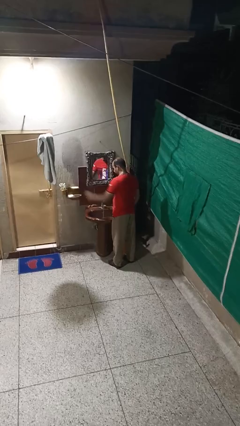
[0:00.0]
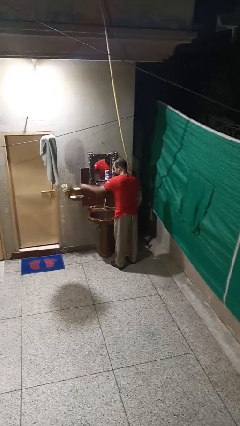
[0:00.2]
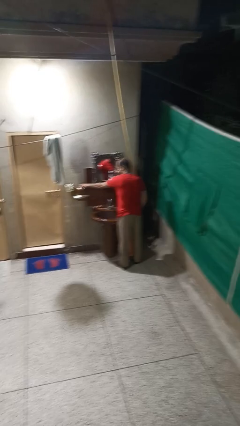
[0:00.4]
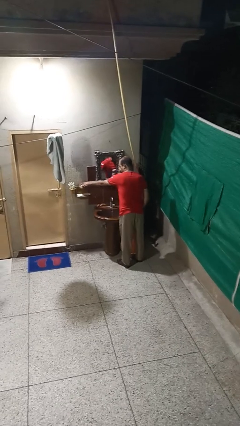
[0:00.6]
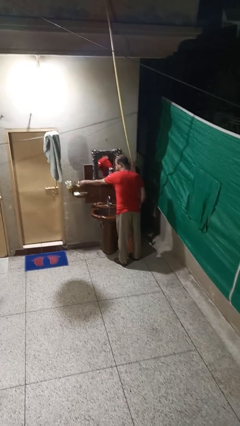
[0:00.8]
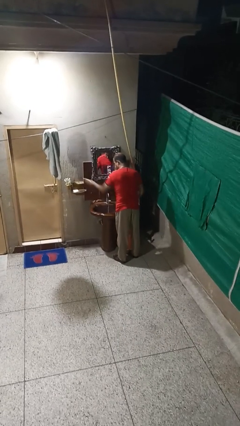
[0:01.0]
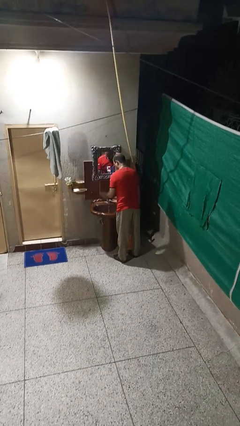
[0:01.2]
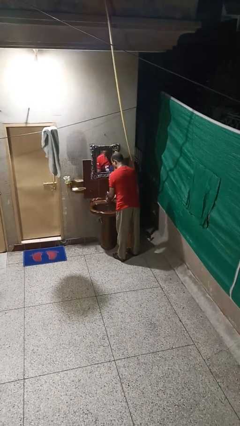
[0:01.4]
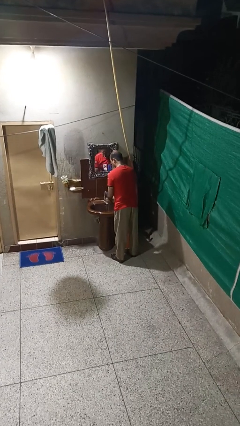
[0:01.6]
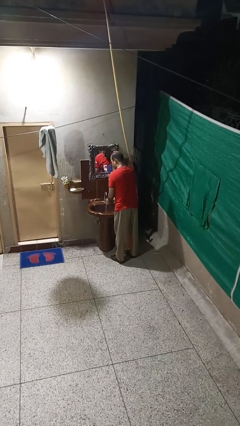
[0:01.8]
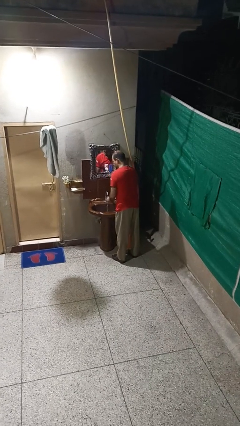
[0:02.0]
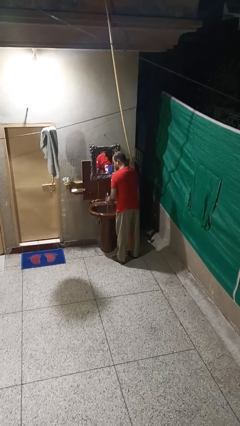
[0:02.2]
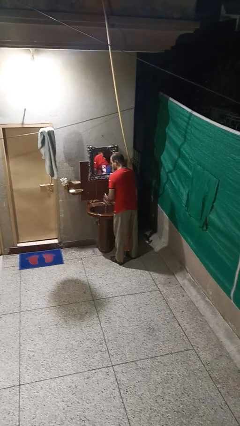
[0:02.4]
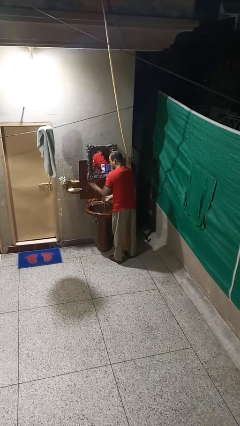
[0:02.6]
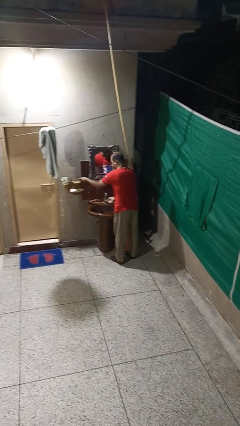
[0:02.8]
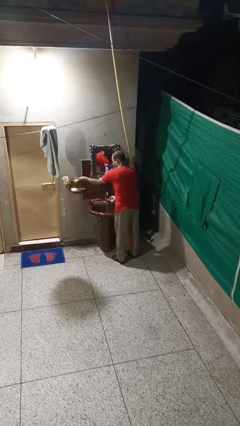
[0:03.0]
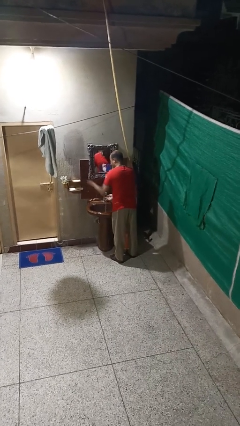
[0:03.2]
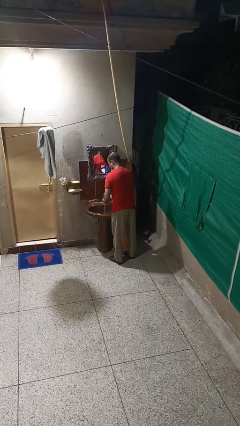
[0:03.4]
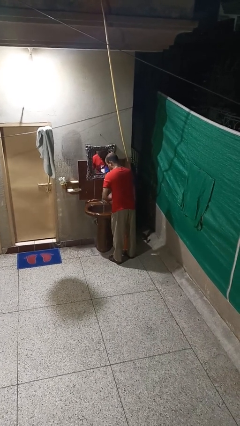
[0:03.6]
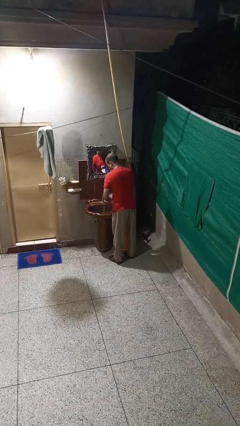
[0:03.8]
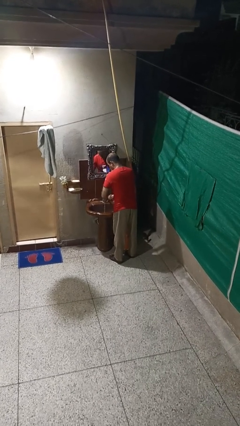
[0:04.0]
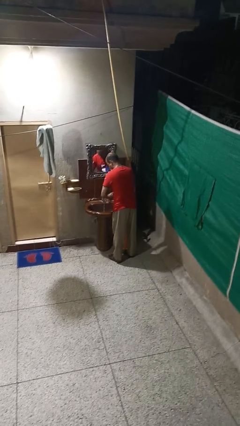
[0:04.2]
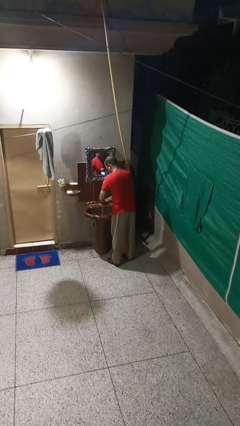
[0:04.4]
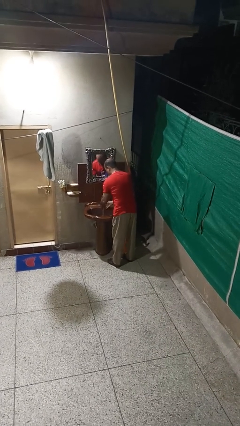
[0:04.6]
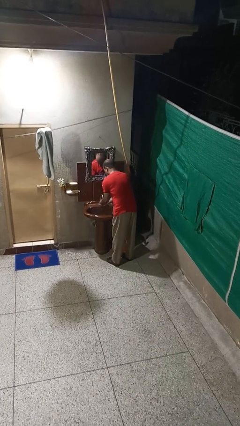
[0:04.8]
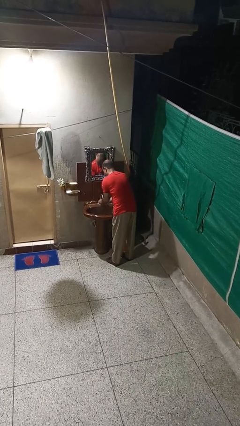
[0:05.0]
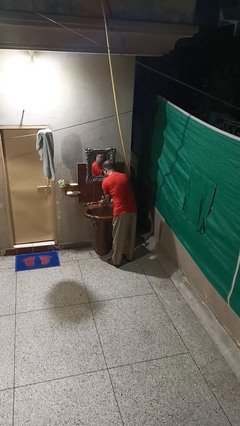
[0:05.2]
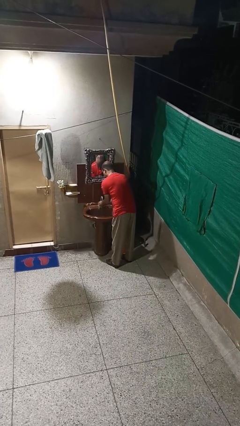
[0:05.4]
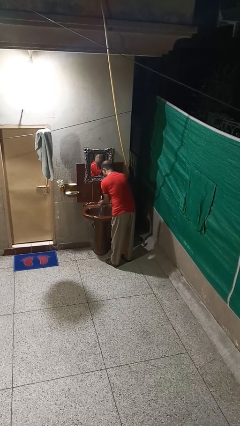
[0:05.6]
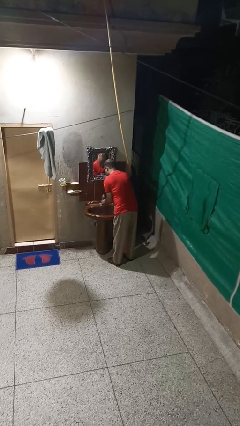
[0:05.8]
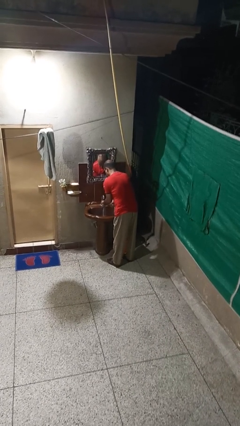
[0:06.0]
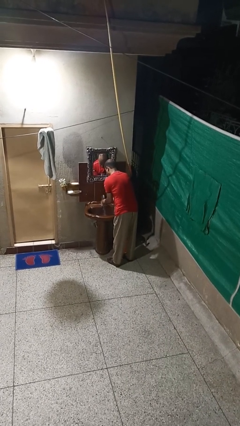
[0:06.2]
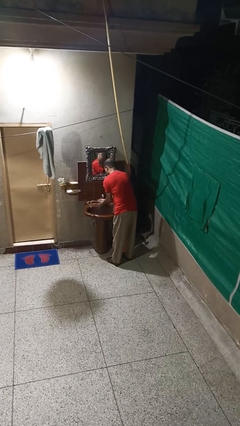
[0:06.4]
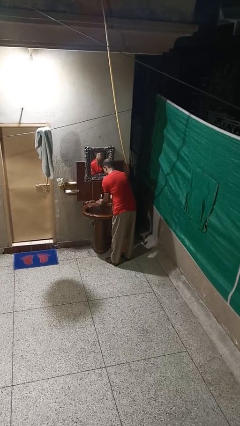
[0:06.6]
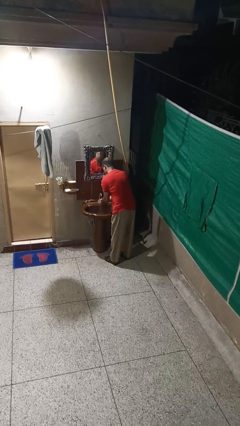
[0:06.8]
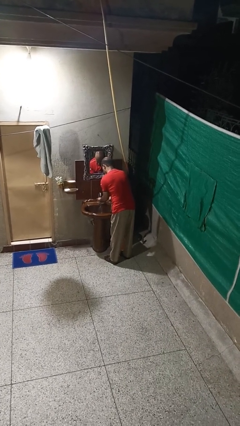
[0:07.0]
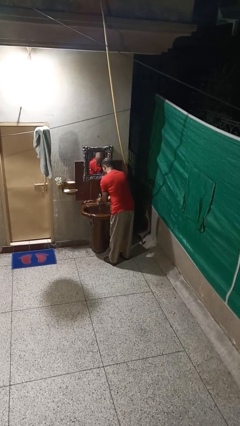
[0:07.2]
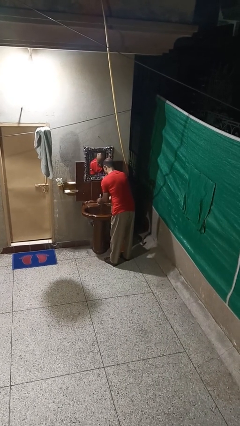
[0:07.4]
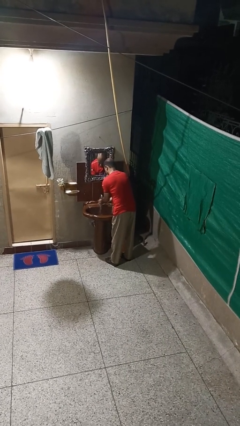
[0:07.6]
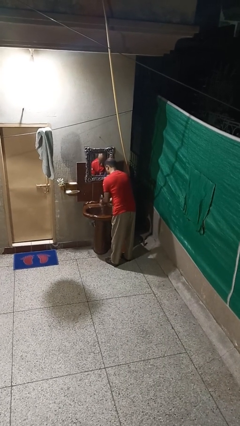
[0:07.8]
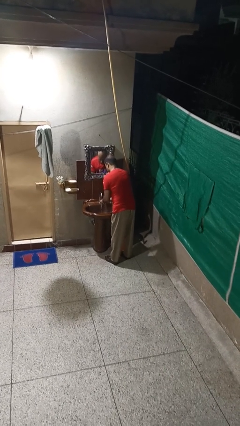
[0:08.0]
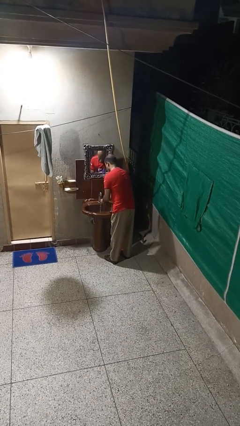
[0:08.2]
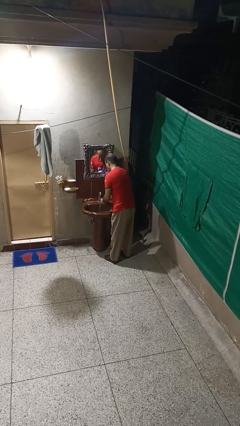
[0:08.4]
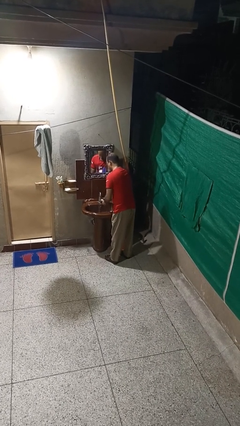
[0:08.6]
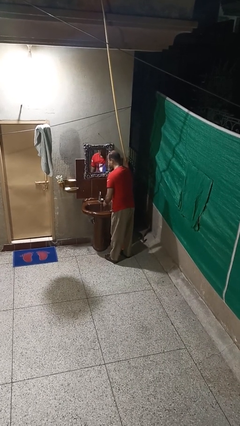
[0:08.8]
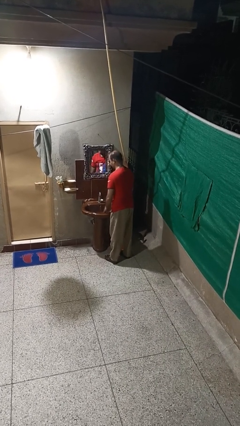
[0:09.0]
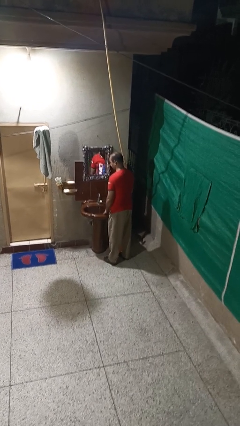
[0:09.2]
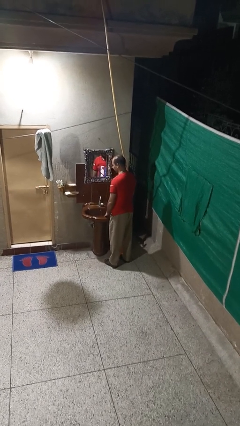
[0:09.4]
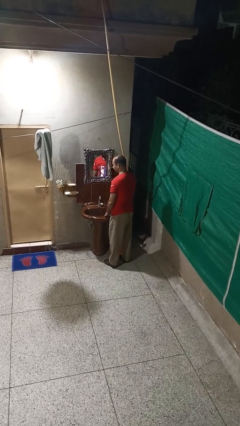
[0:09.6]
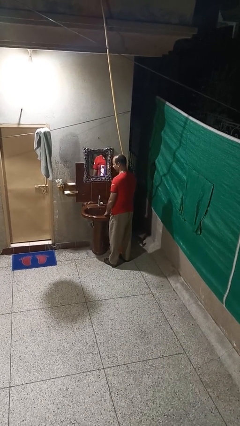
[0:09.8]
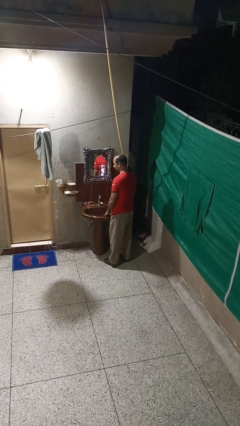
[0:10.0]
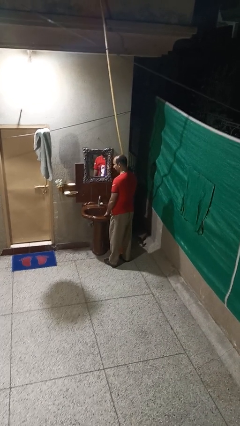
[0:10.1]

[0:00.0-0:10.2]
person washes hands

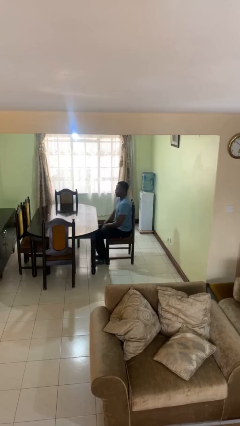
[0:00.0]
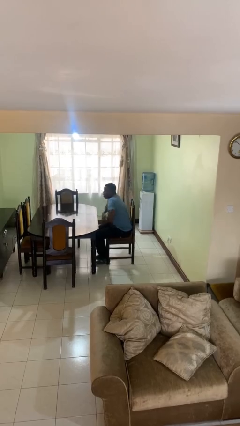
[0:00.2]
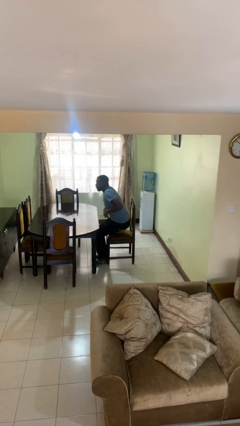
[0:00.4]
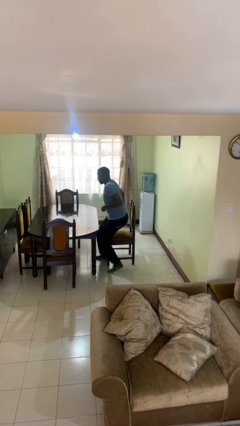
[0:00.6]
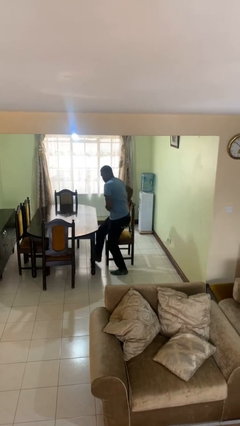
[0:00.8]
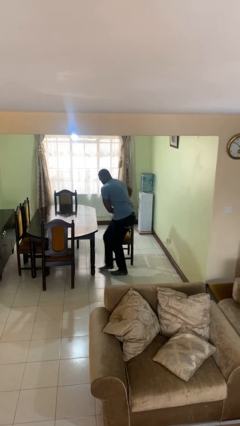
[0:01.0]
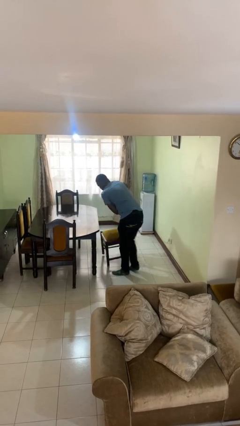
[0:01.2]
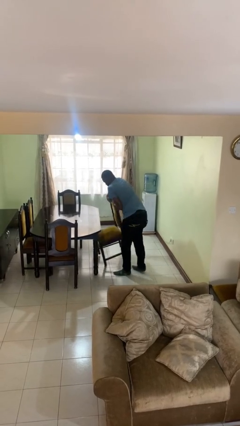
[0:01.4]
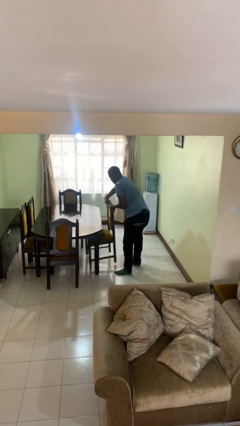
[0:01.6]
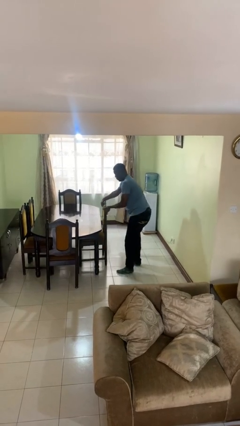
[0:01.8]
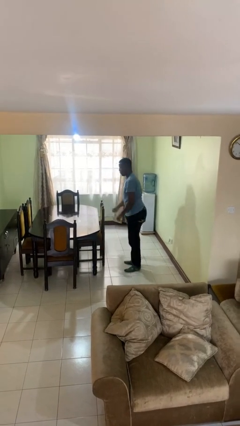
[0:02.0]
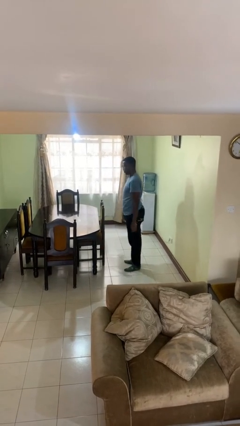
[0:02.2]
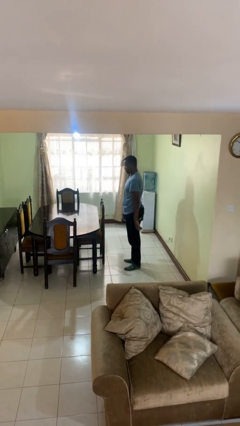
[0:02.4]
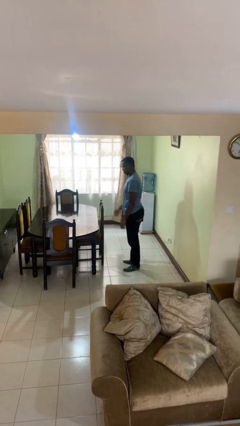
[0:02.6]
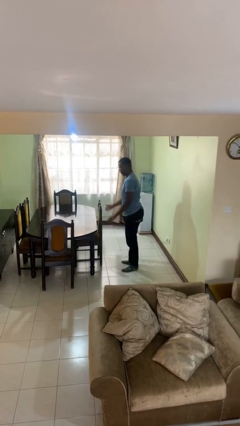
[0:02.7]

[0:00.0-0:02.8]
person stands up

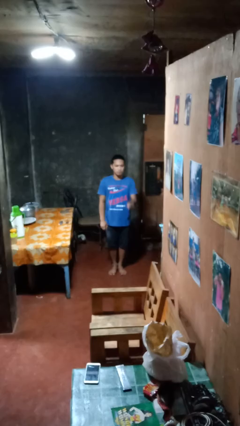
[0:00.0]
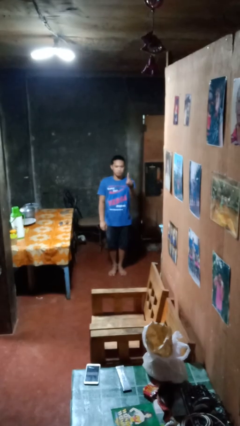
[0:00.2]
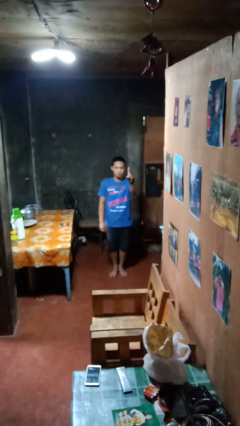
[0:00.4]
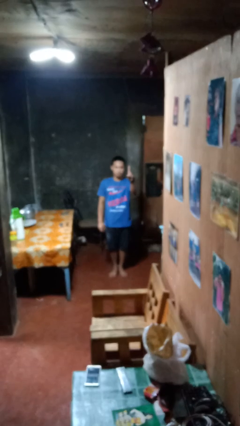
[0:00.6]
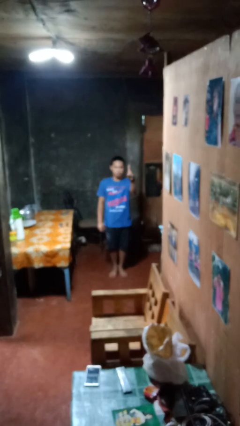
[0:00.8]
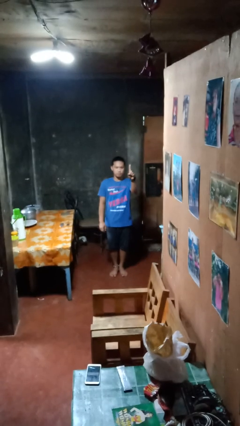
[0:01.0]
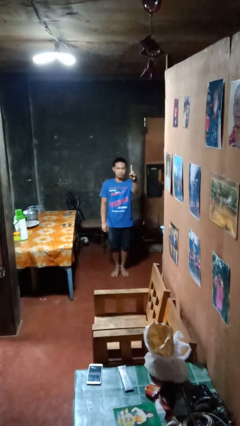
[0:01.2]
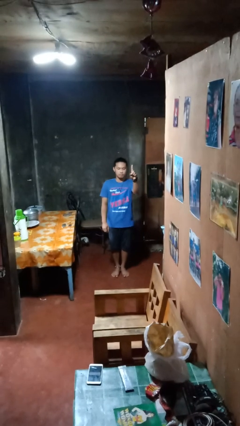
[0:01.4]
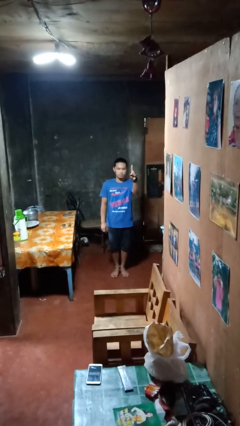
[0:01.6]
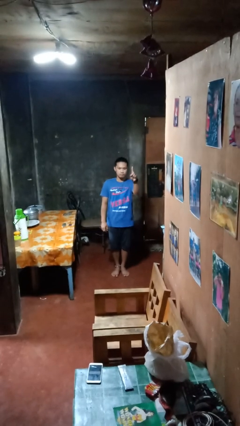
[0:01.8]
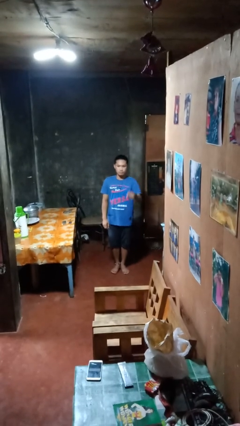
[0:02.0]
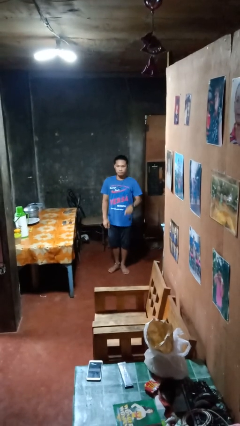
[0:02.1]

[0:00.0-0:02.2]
person gestures number one

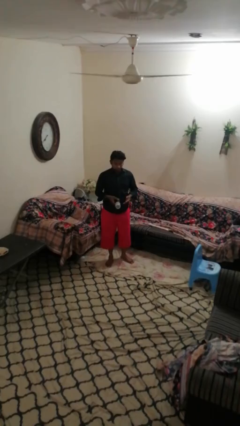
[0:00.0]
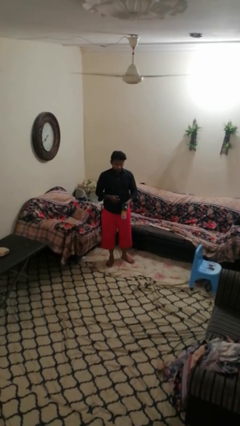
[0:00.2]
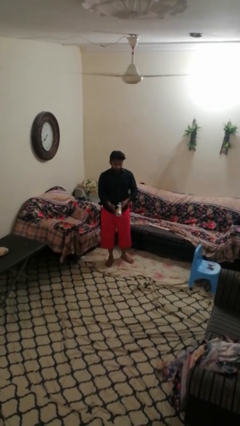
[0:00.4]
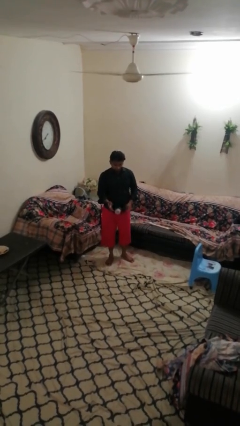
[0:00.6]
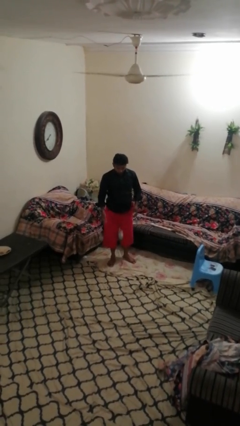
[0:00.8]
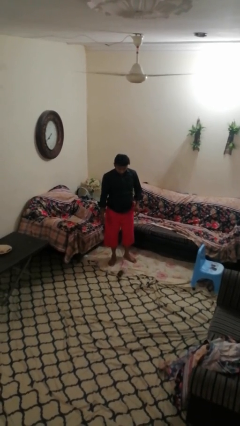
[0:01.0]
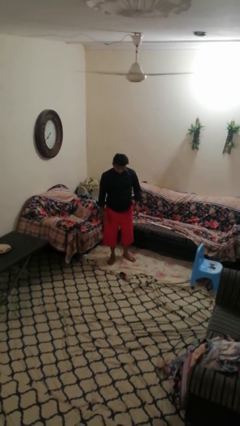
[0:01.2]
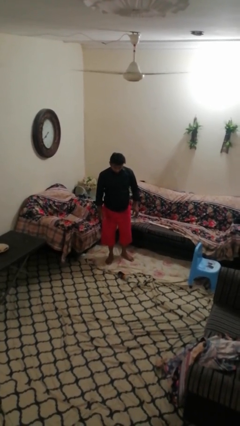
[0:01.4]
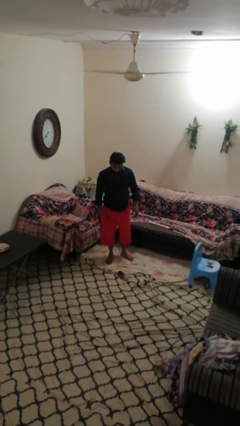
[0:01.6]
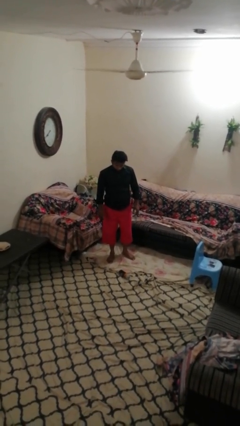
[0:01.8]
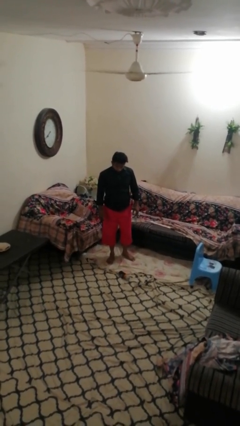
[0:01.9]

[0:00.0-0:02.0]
person drops object

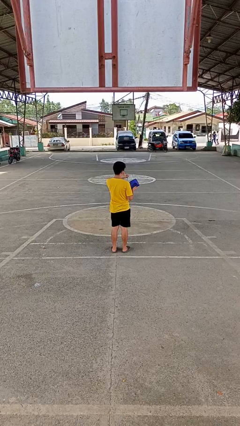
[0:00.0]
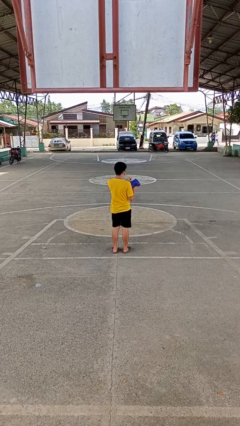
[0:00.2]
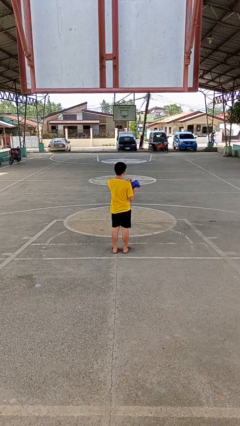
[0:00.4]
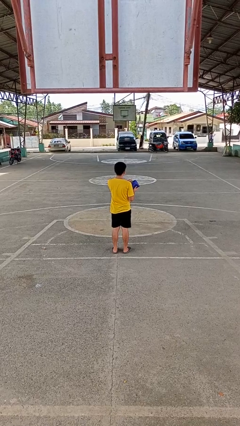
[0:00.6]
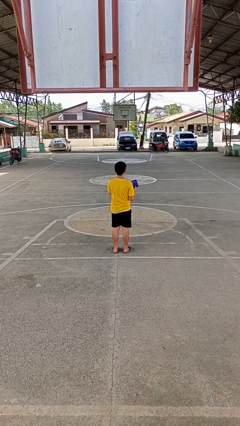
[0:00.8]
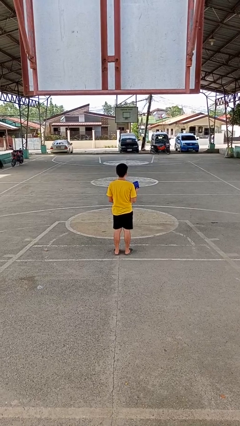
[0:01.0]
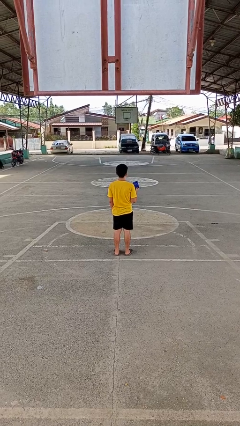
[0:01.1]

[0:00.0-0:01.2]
person puts object into purse
